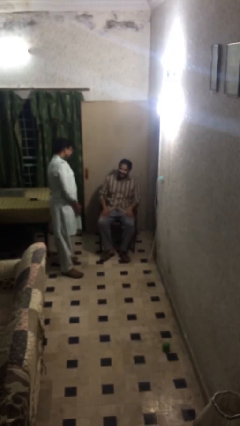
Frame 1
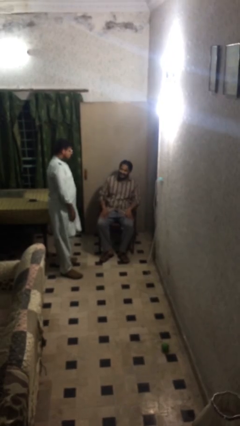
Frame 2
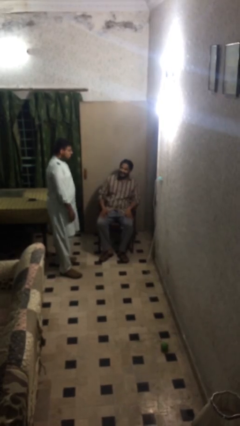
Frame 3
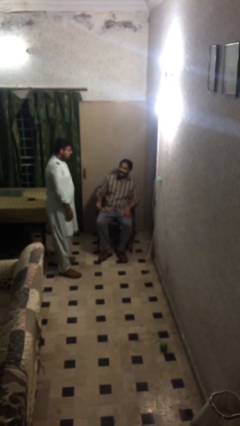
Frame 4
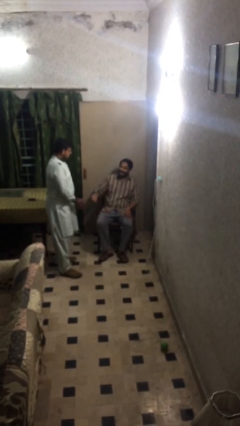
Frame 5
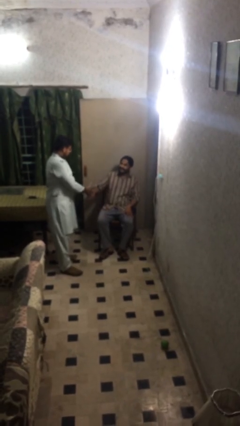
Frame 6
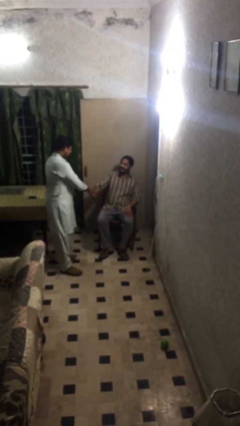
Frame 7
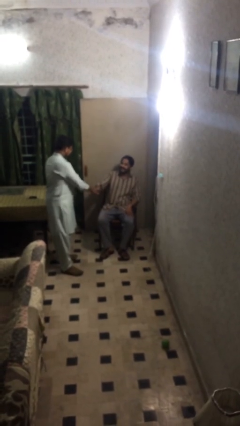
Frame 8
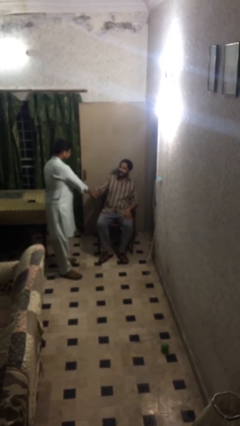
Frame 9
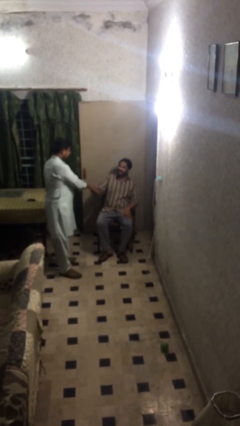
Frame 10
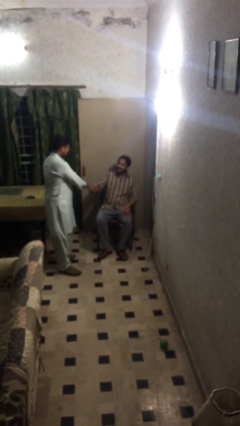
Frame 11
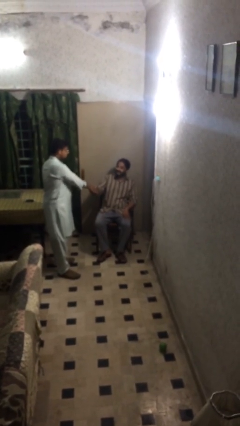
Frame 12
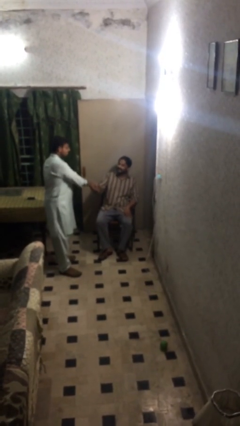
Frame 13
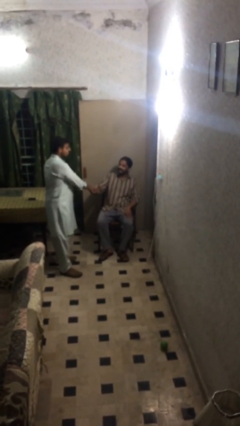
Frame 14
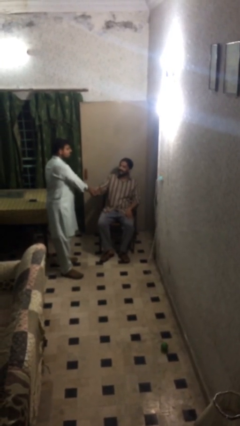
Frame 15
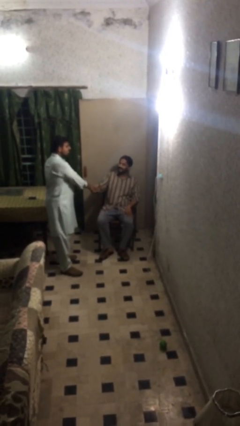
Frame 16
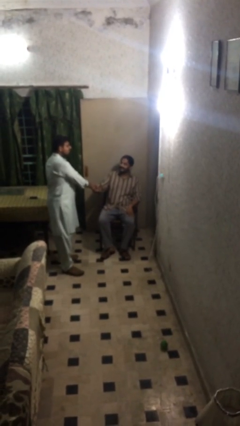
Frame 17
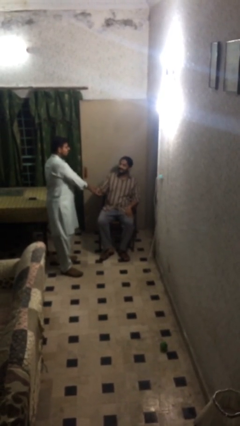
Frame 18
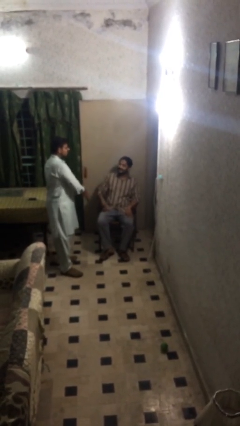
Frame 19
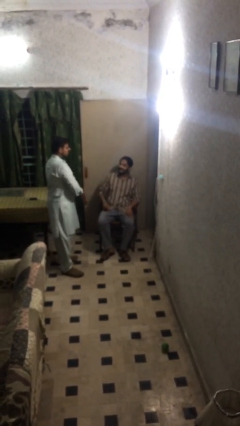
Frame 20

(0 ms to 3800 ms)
person shakes hand

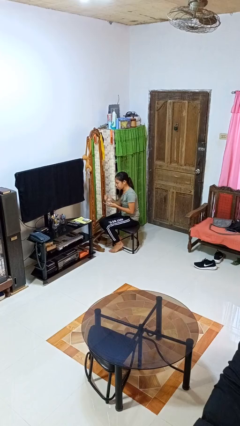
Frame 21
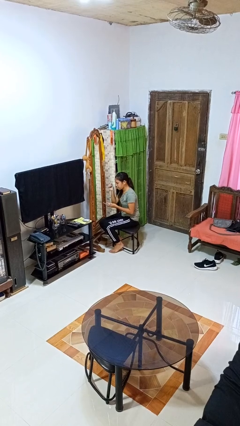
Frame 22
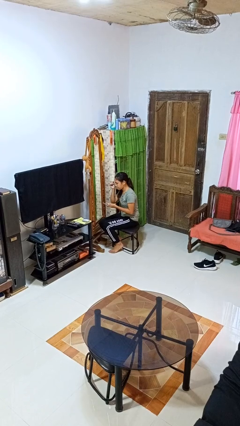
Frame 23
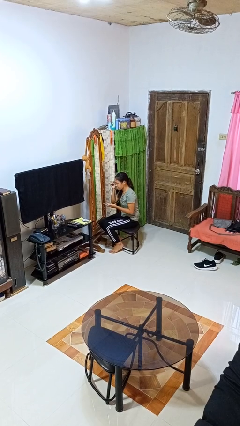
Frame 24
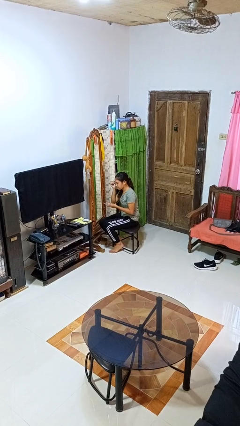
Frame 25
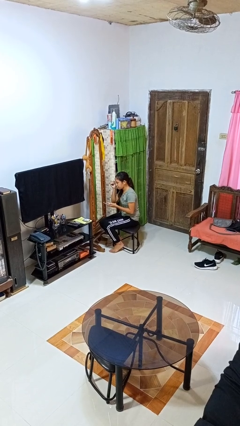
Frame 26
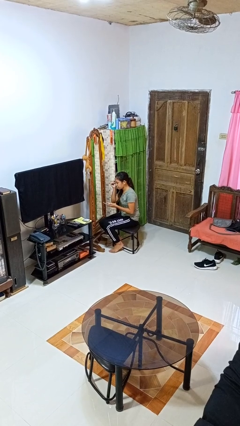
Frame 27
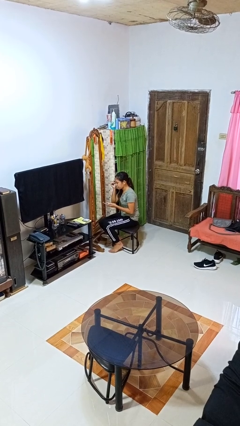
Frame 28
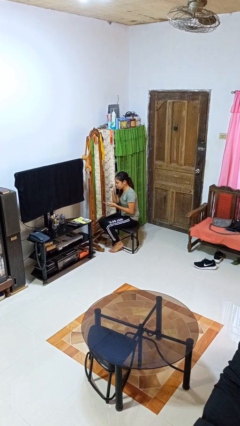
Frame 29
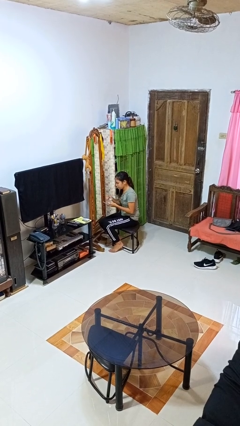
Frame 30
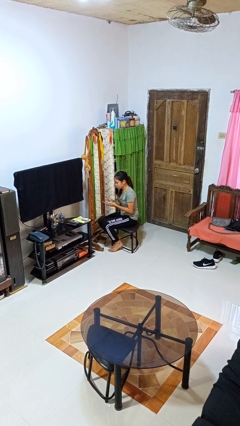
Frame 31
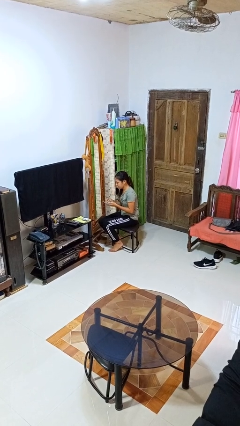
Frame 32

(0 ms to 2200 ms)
person applies eye makeup

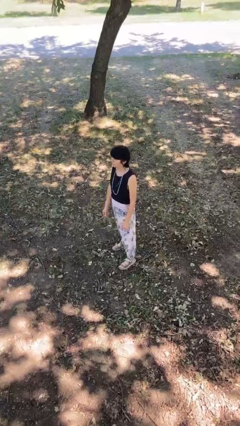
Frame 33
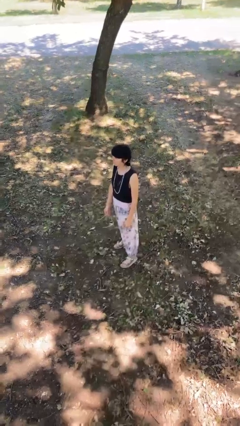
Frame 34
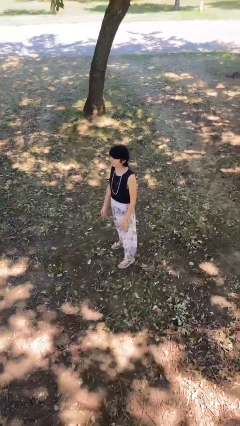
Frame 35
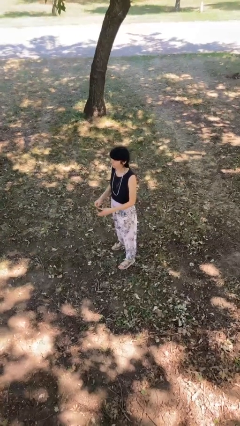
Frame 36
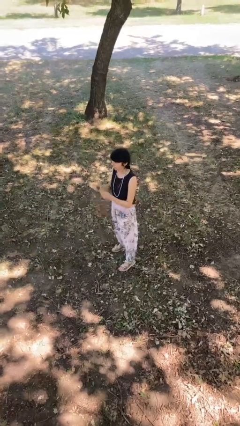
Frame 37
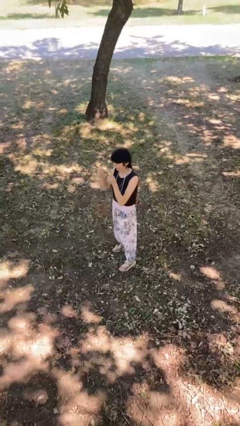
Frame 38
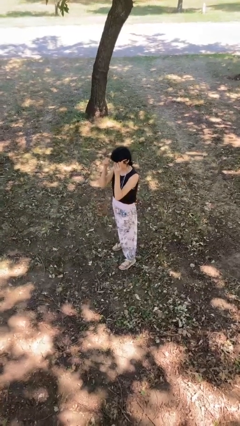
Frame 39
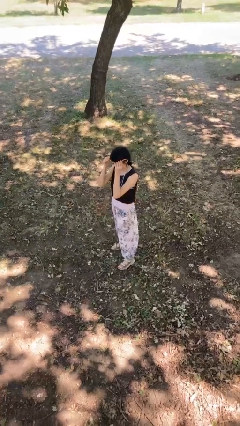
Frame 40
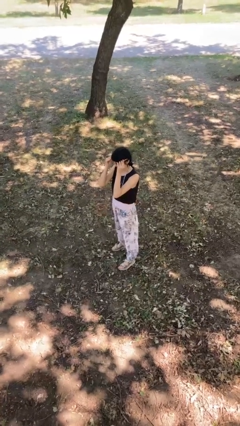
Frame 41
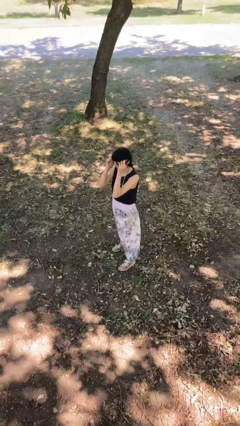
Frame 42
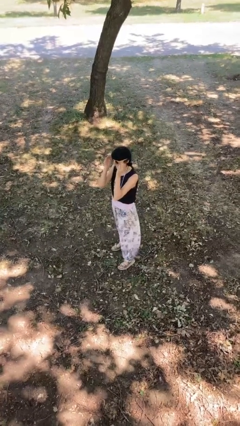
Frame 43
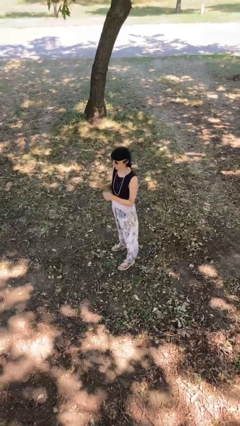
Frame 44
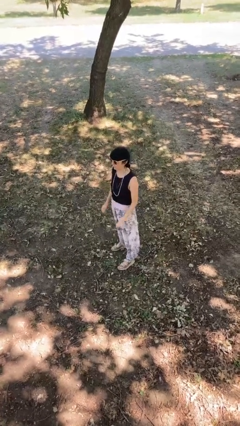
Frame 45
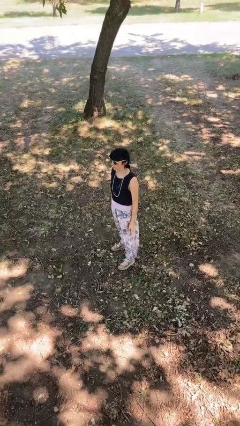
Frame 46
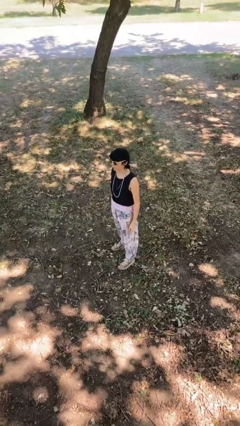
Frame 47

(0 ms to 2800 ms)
person puts on sunglasses

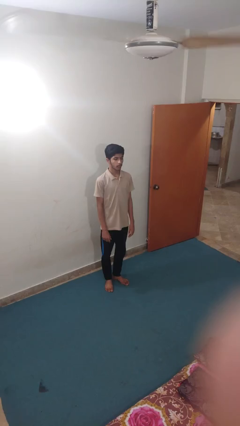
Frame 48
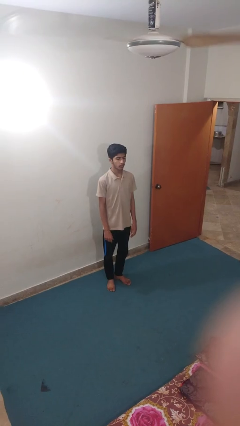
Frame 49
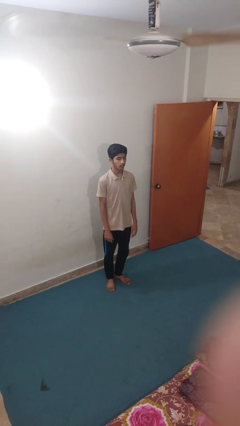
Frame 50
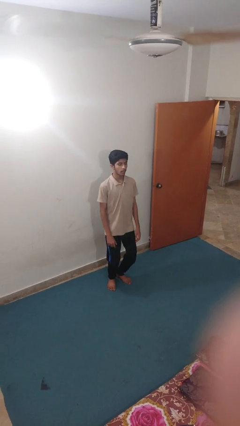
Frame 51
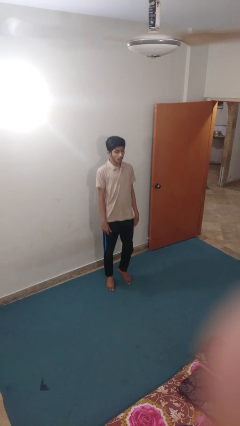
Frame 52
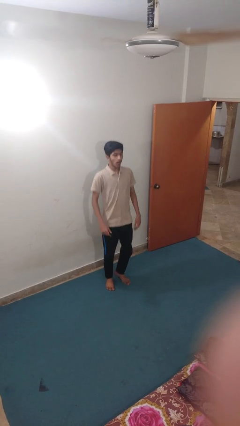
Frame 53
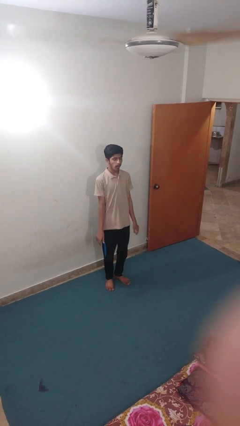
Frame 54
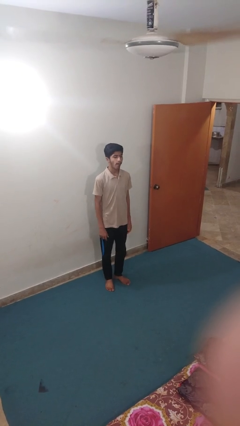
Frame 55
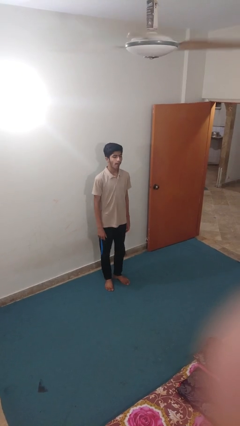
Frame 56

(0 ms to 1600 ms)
person jumps

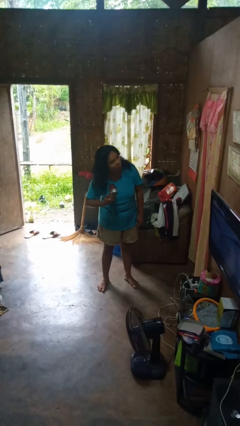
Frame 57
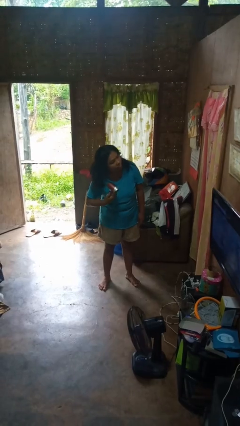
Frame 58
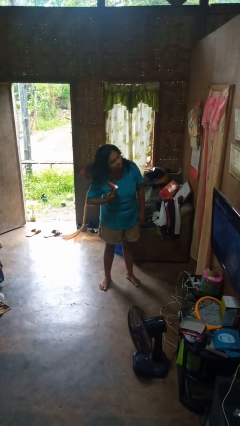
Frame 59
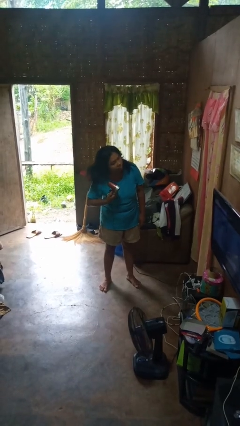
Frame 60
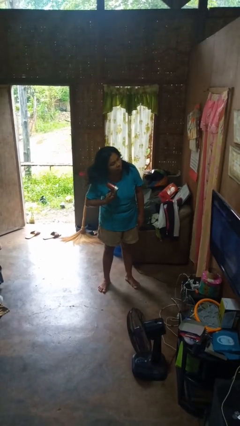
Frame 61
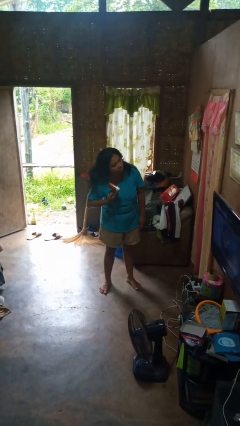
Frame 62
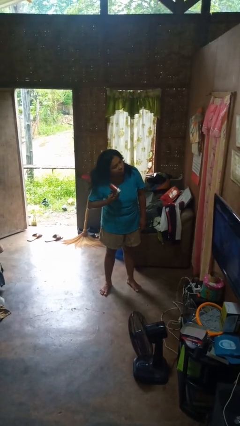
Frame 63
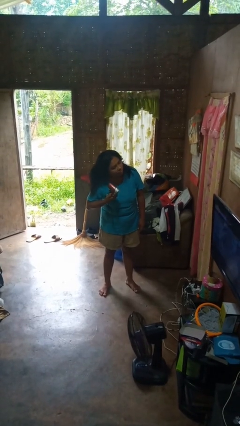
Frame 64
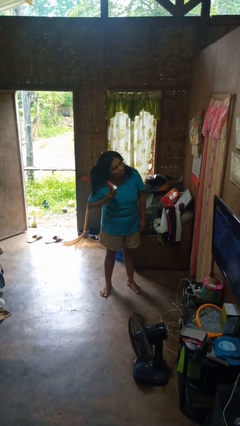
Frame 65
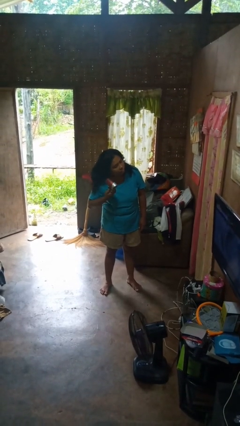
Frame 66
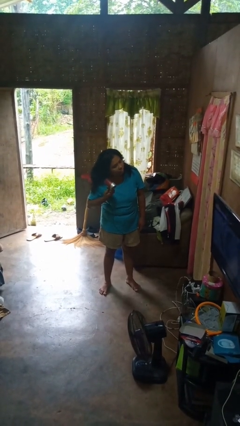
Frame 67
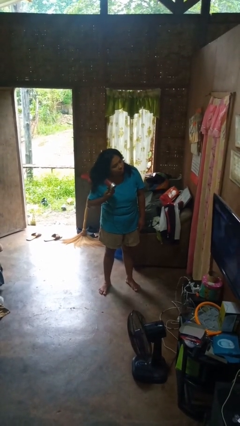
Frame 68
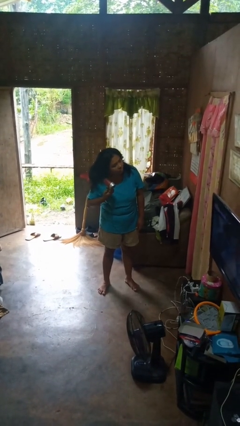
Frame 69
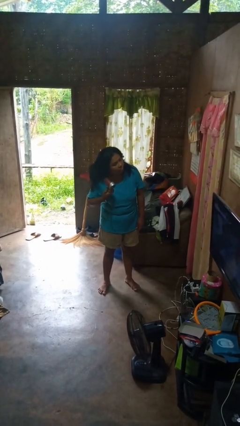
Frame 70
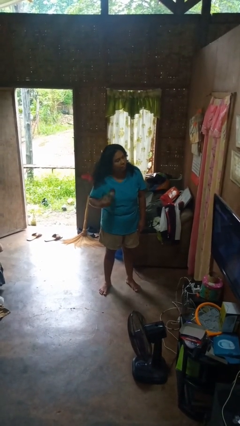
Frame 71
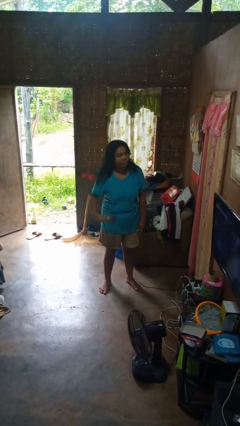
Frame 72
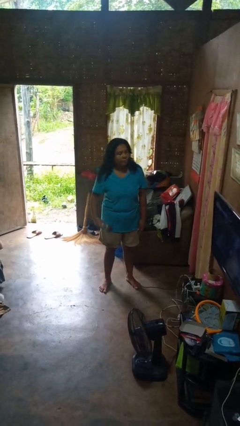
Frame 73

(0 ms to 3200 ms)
person dries hair with hairdryer

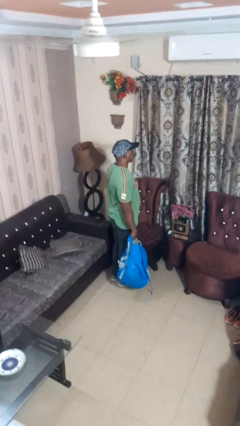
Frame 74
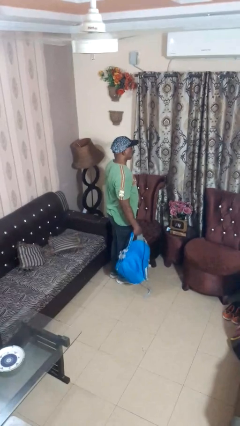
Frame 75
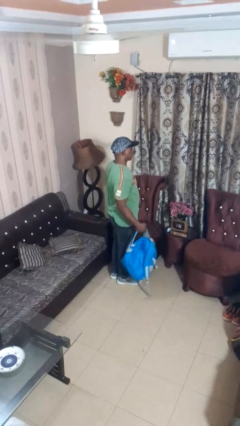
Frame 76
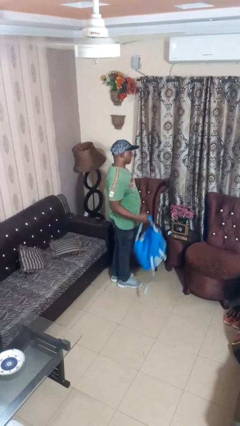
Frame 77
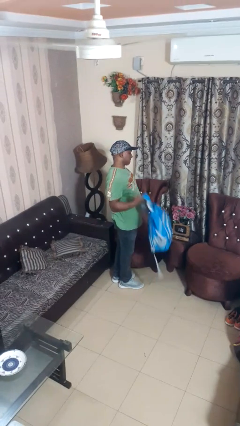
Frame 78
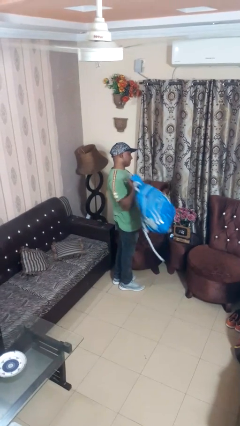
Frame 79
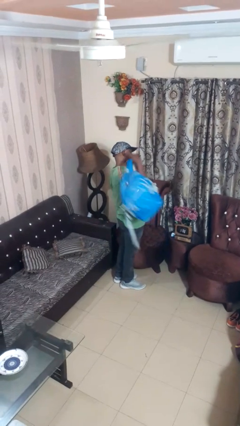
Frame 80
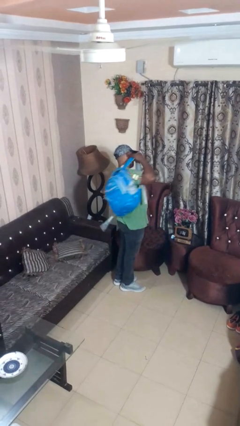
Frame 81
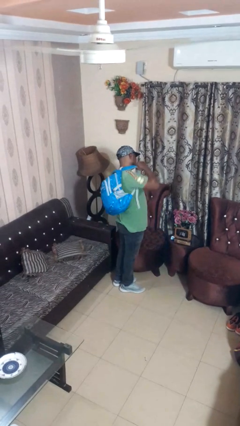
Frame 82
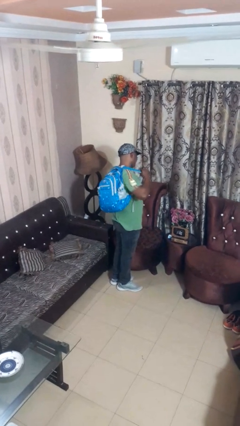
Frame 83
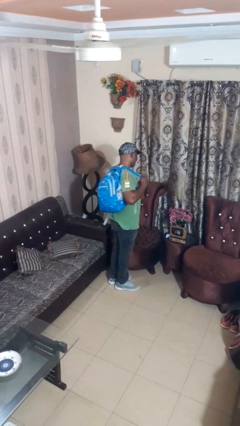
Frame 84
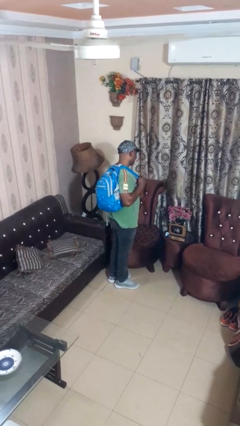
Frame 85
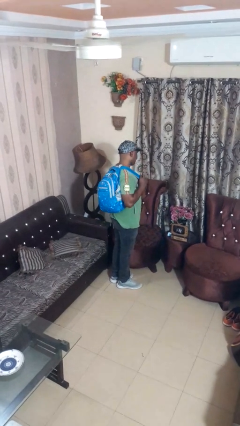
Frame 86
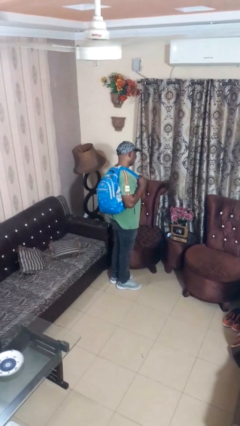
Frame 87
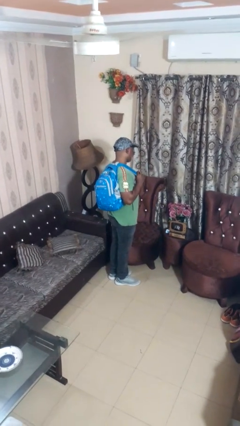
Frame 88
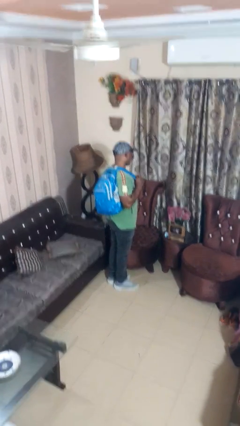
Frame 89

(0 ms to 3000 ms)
person puts on backpack

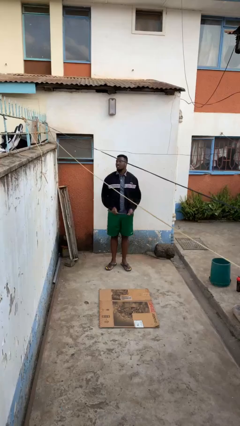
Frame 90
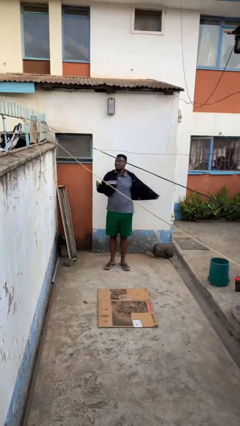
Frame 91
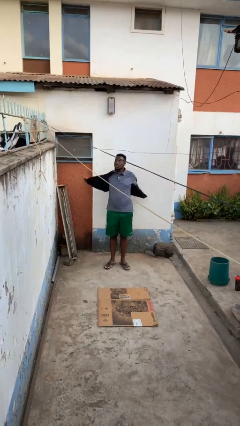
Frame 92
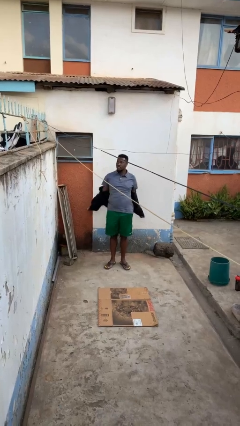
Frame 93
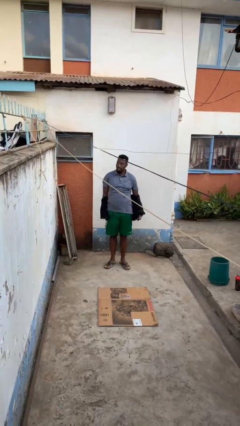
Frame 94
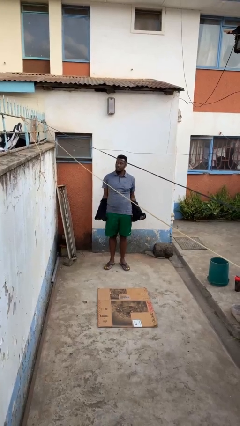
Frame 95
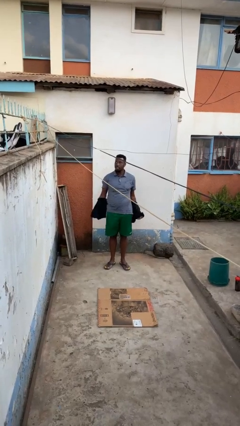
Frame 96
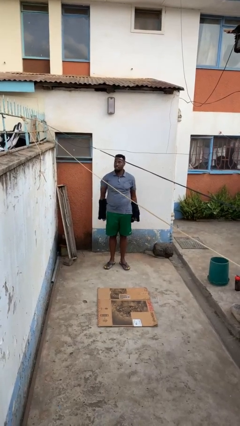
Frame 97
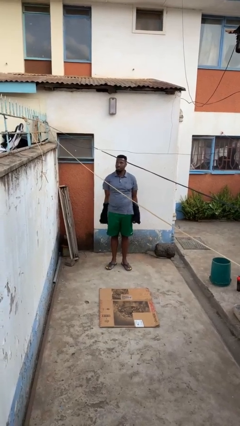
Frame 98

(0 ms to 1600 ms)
person takes off jacket
